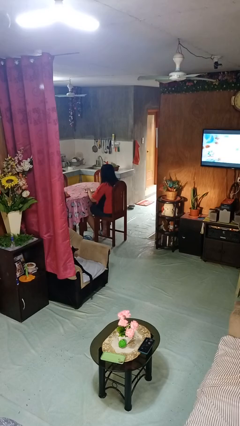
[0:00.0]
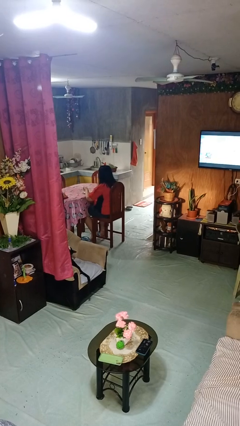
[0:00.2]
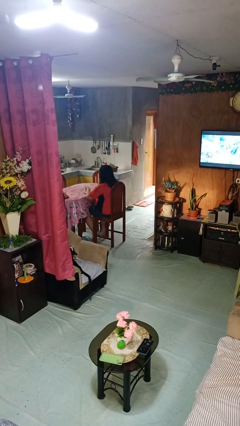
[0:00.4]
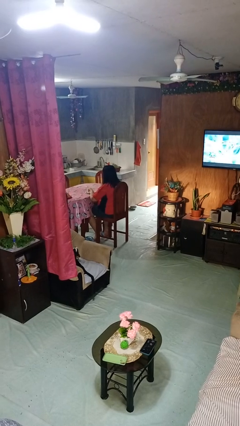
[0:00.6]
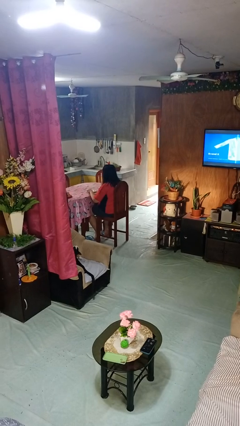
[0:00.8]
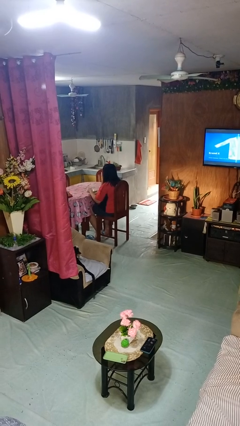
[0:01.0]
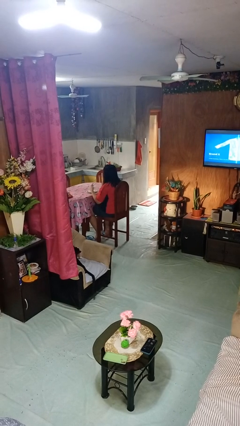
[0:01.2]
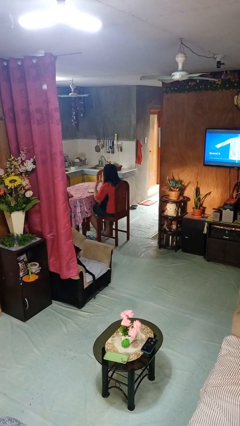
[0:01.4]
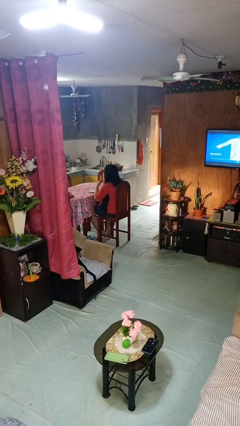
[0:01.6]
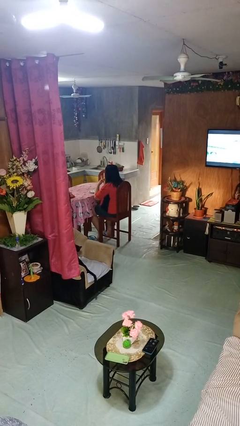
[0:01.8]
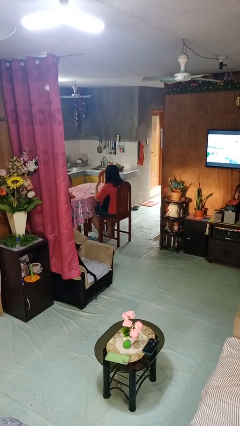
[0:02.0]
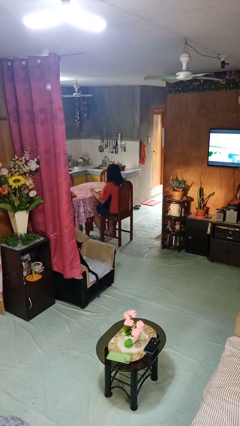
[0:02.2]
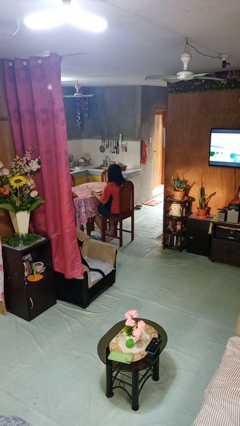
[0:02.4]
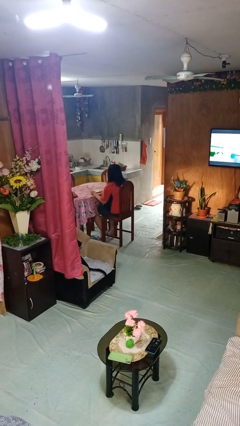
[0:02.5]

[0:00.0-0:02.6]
person eats with utensil

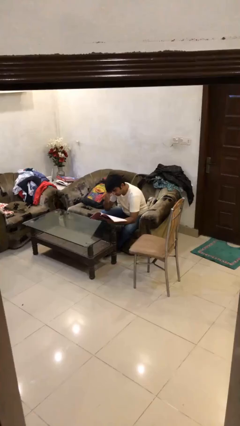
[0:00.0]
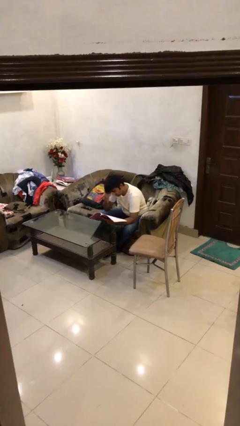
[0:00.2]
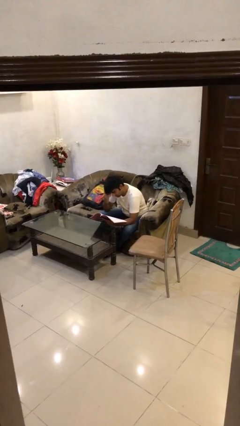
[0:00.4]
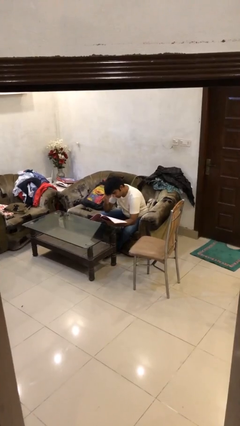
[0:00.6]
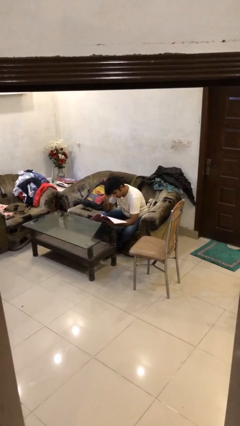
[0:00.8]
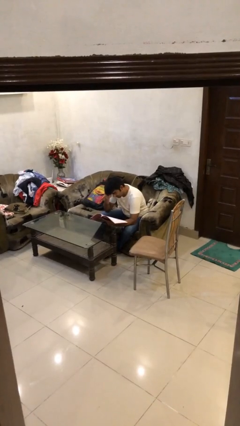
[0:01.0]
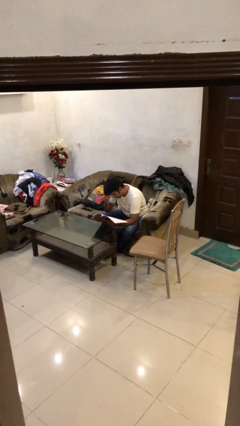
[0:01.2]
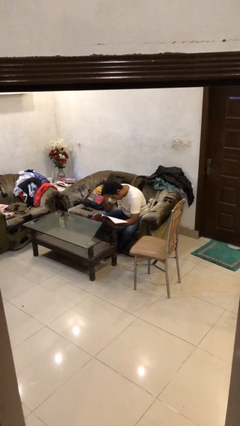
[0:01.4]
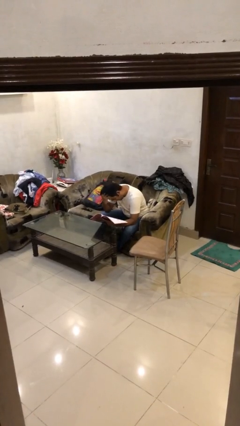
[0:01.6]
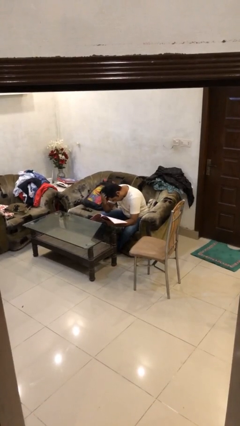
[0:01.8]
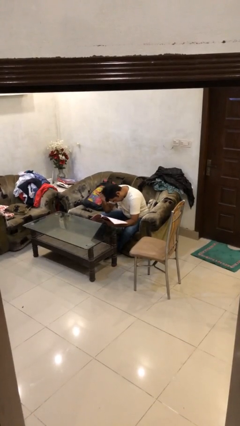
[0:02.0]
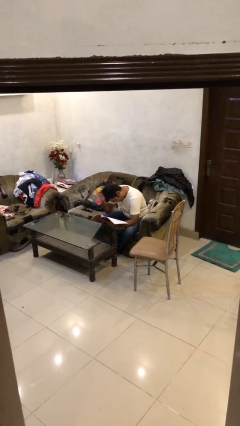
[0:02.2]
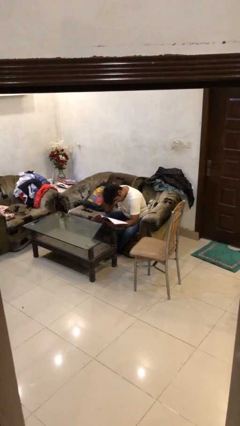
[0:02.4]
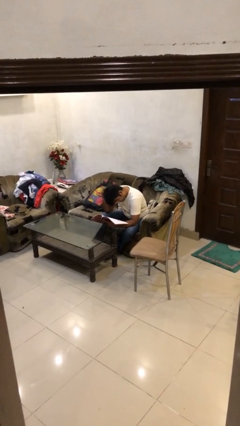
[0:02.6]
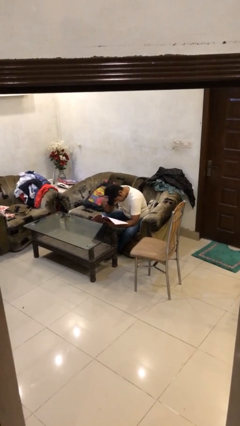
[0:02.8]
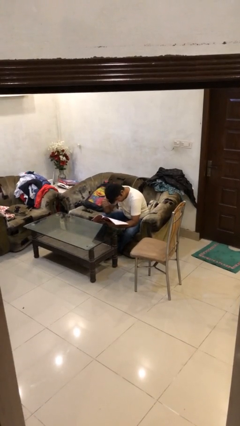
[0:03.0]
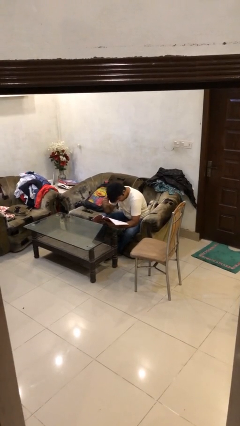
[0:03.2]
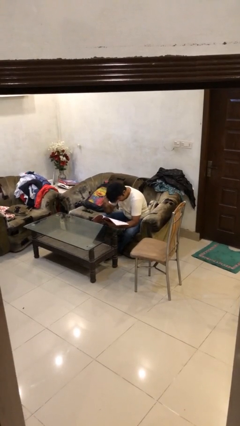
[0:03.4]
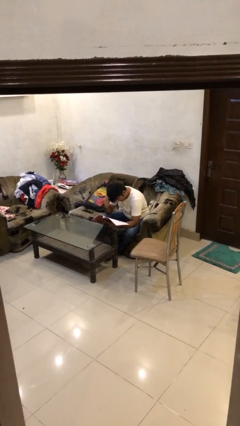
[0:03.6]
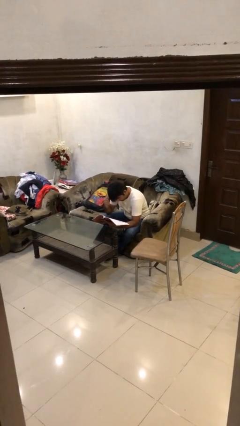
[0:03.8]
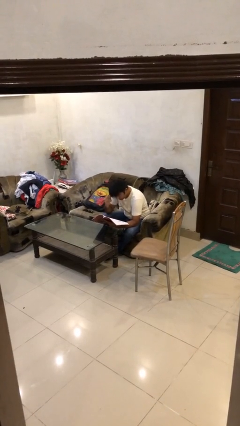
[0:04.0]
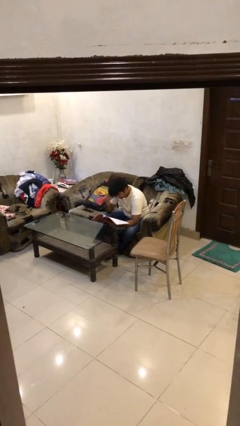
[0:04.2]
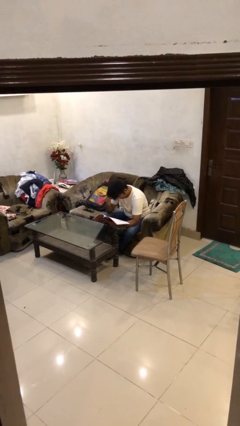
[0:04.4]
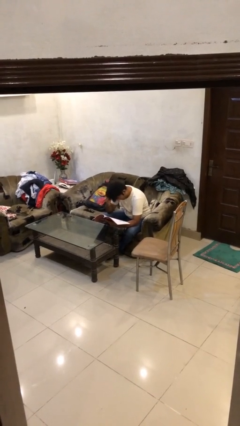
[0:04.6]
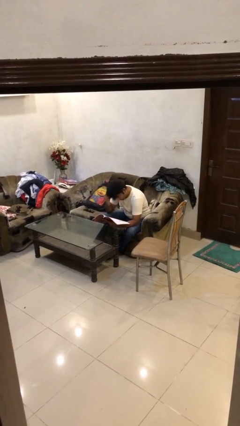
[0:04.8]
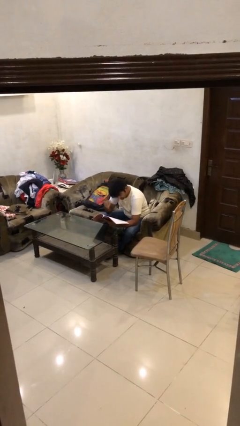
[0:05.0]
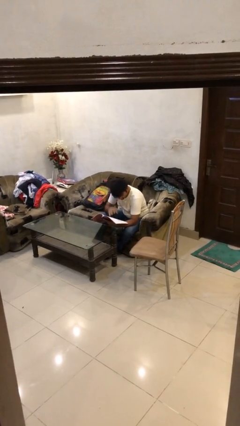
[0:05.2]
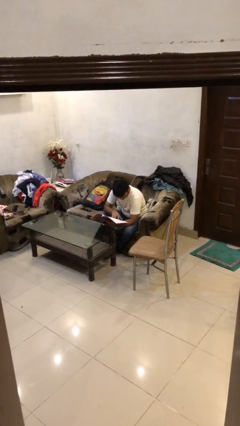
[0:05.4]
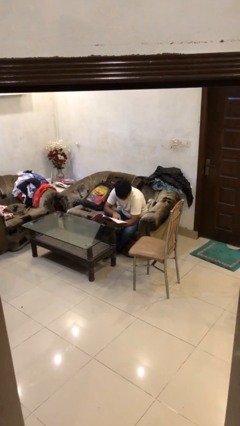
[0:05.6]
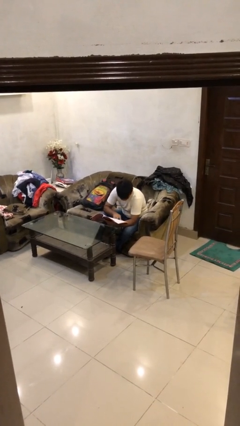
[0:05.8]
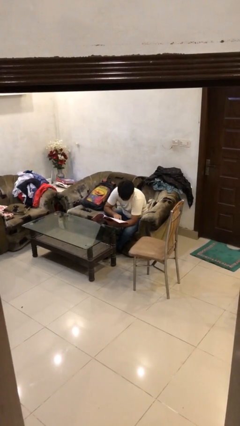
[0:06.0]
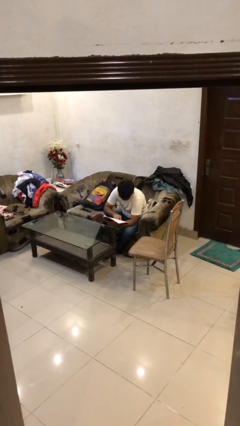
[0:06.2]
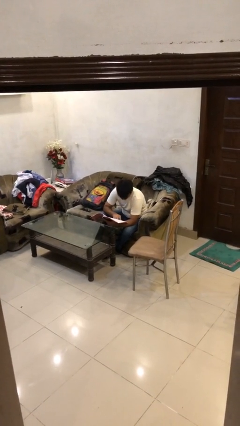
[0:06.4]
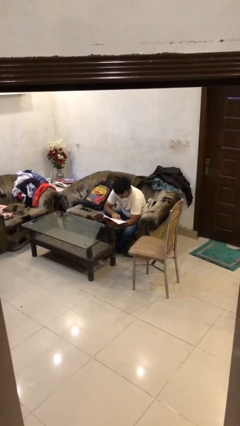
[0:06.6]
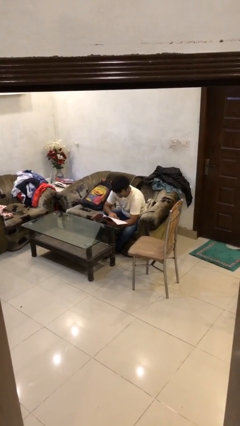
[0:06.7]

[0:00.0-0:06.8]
person reads document

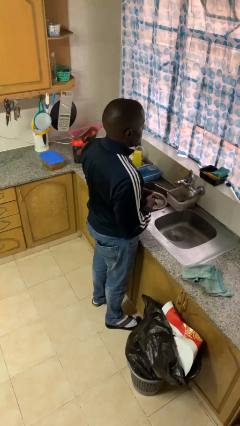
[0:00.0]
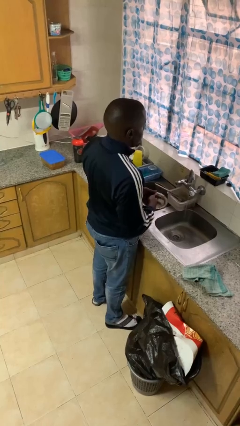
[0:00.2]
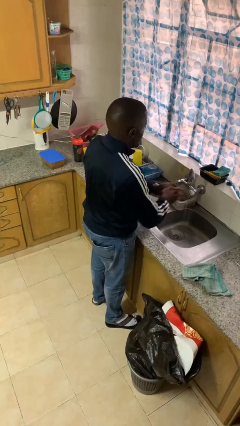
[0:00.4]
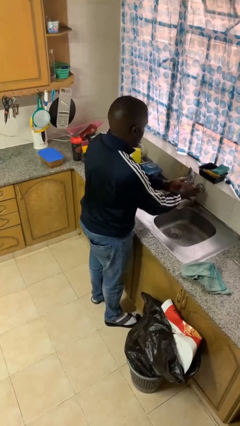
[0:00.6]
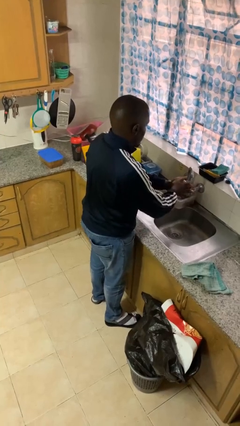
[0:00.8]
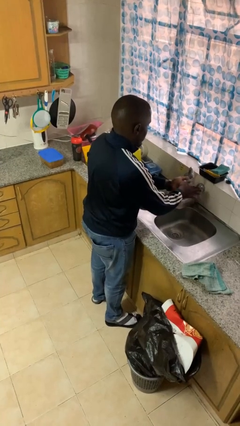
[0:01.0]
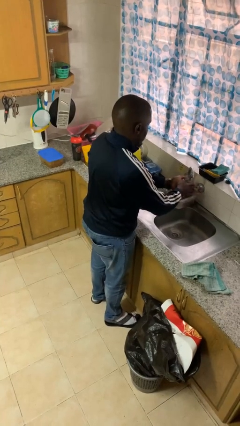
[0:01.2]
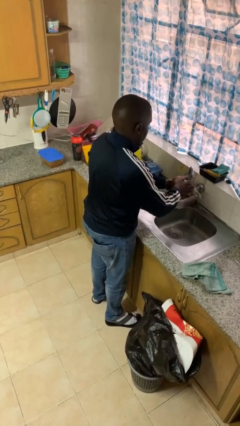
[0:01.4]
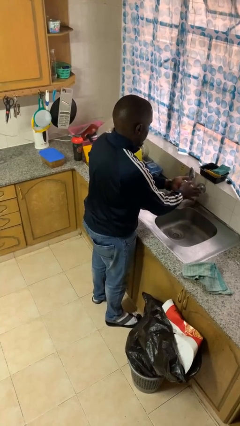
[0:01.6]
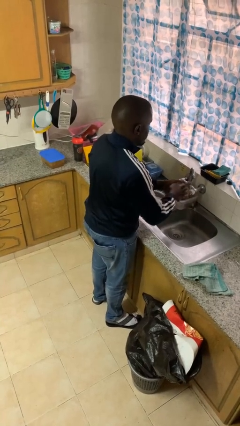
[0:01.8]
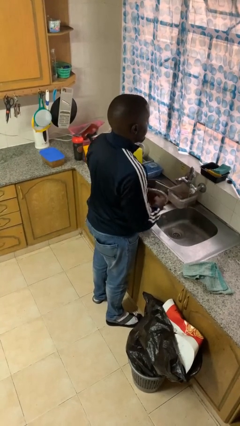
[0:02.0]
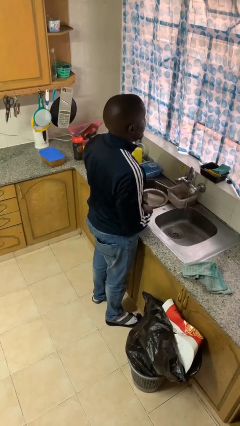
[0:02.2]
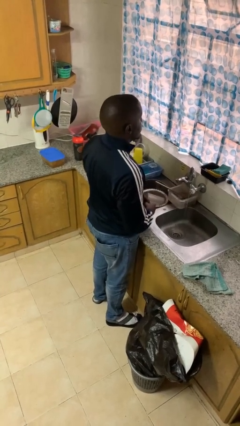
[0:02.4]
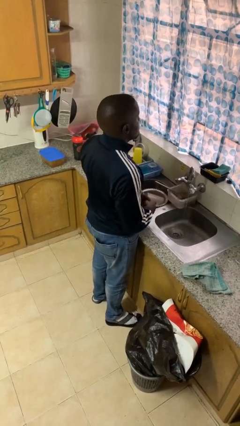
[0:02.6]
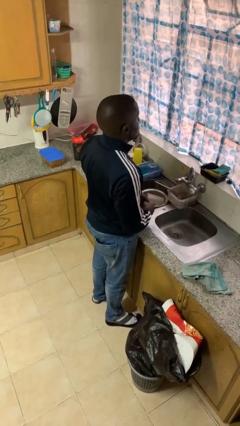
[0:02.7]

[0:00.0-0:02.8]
person washes hands

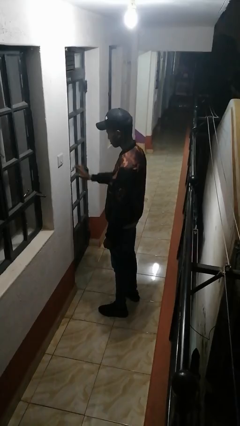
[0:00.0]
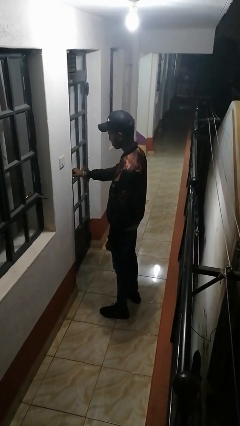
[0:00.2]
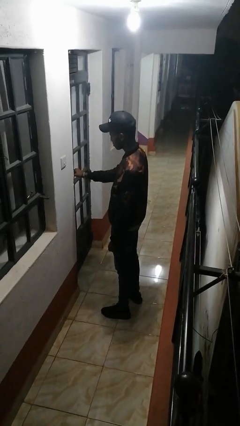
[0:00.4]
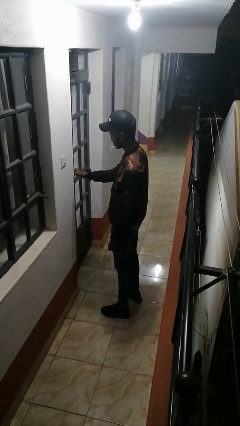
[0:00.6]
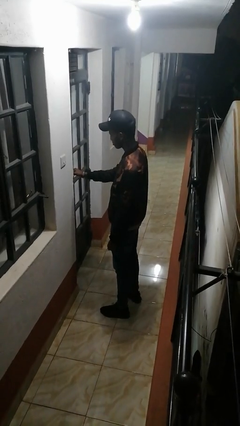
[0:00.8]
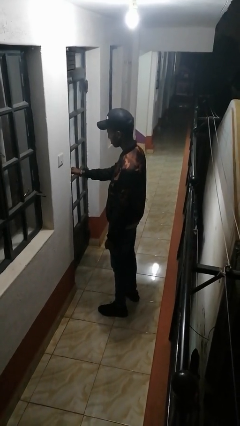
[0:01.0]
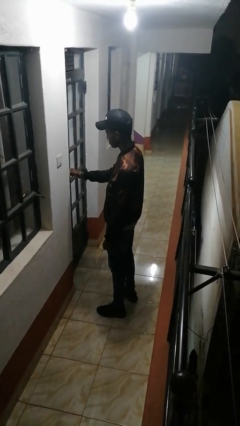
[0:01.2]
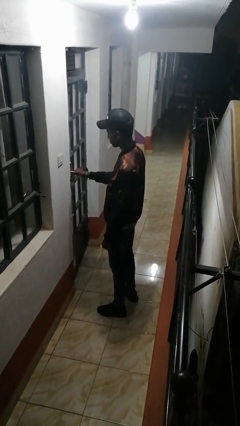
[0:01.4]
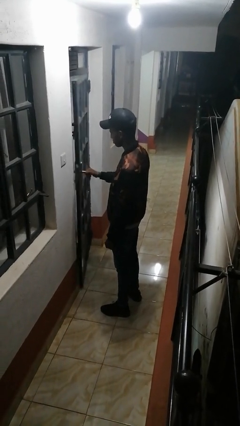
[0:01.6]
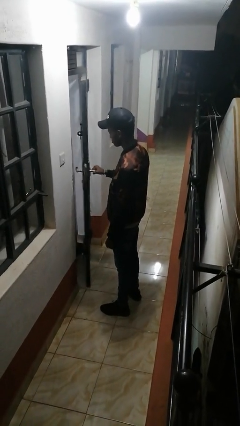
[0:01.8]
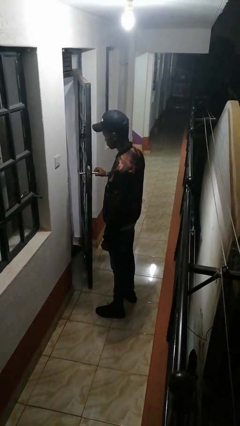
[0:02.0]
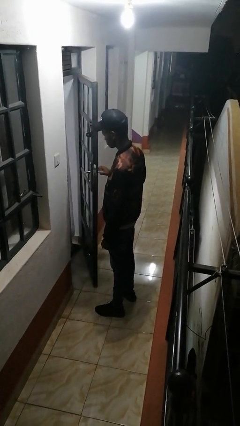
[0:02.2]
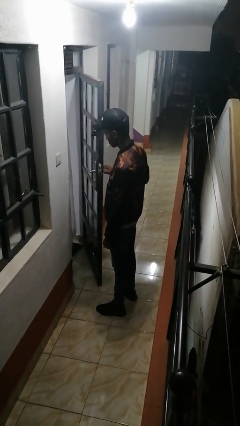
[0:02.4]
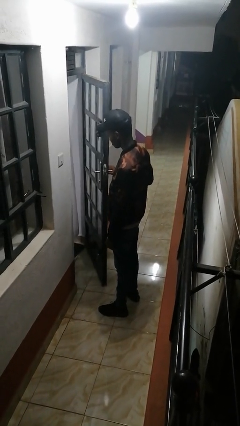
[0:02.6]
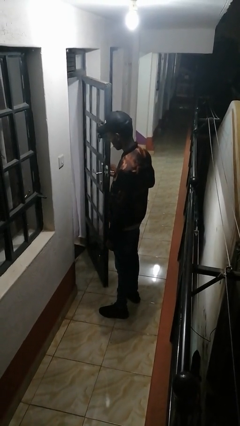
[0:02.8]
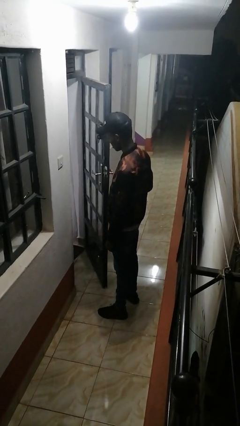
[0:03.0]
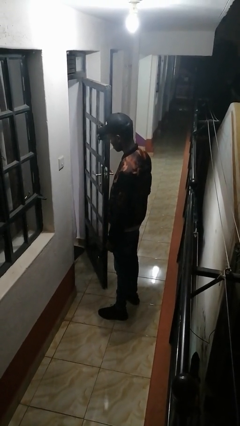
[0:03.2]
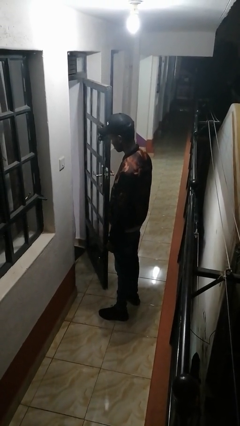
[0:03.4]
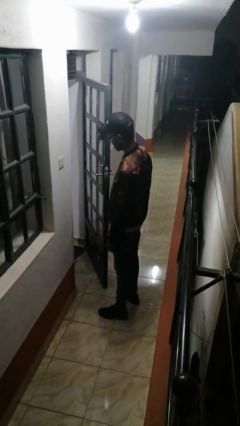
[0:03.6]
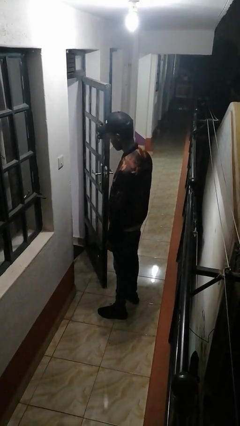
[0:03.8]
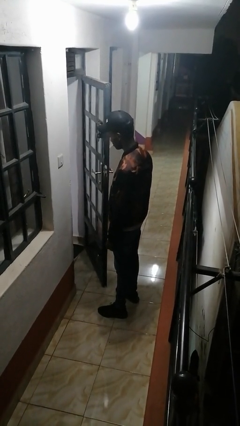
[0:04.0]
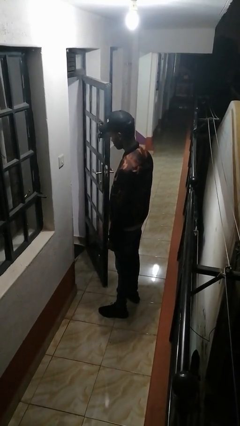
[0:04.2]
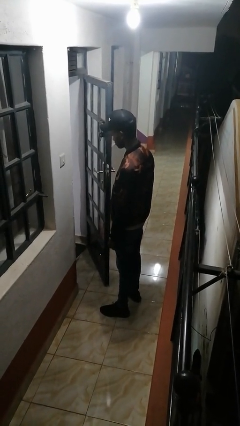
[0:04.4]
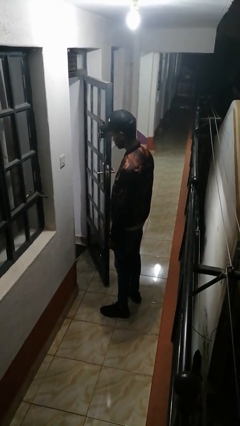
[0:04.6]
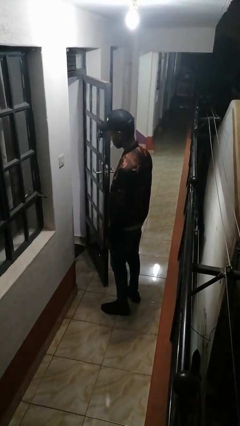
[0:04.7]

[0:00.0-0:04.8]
person opens facility door

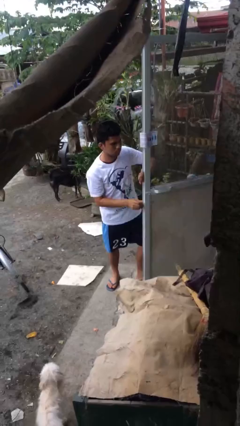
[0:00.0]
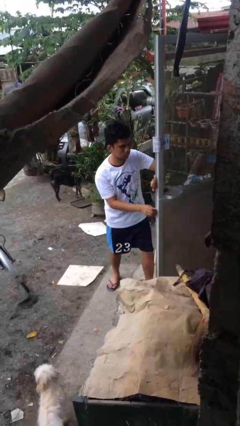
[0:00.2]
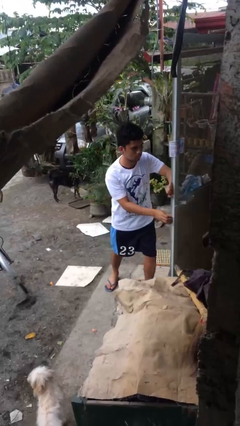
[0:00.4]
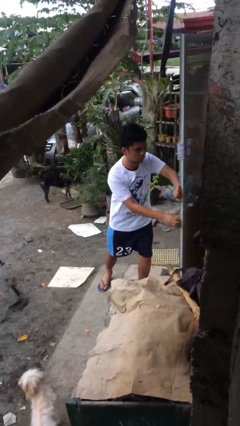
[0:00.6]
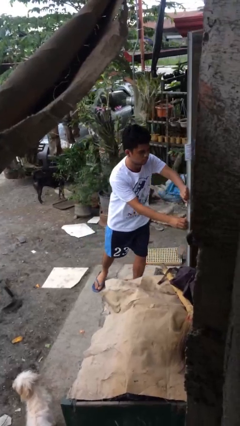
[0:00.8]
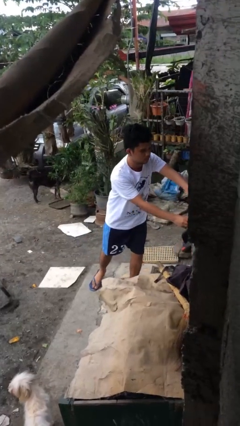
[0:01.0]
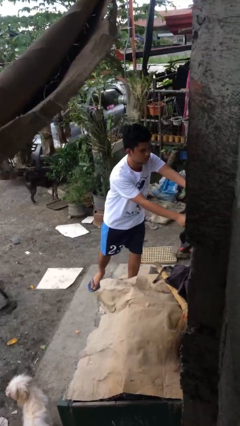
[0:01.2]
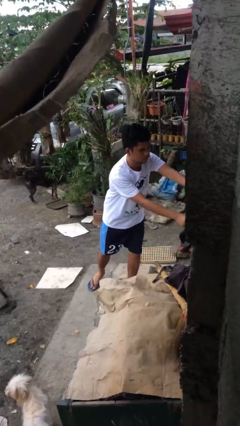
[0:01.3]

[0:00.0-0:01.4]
person closes facility door
